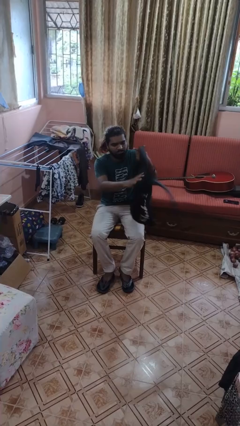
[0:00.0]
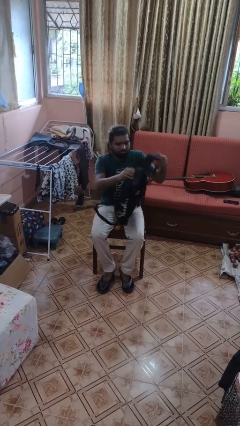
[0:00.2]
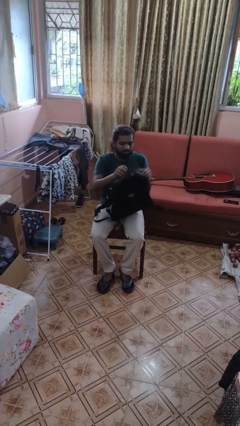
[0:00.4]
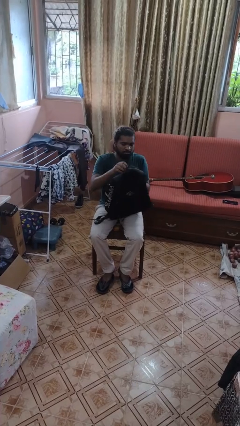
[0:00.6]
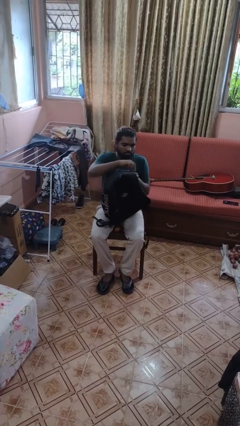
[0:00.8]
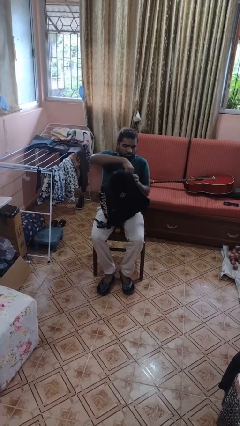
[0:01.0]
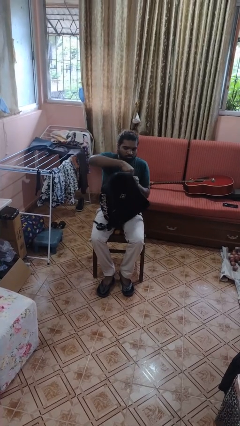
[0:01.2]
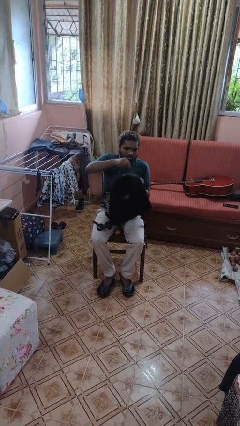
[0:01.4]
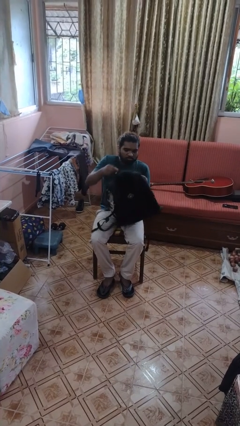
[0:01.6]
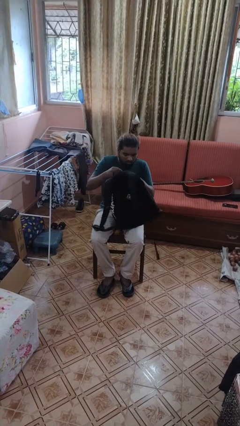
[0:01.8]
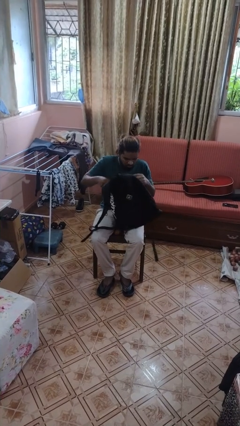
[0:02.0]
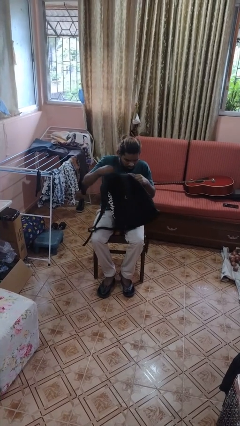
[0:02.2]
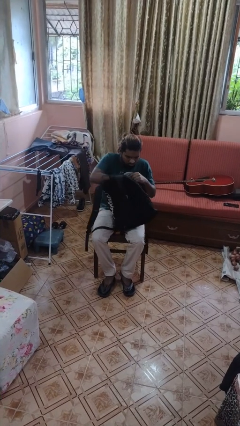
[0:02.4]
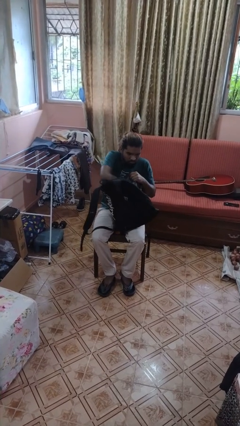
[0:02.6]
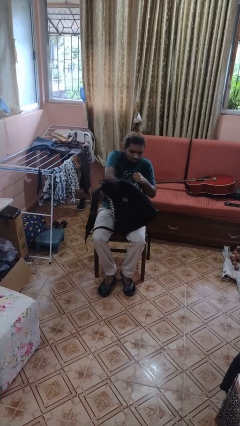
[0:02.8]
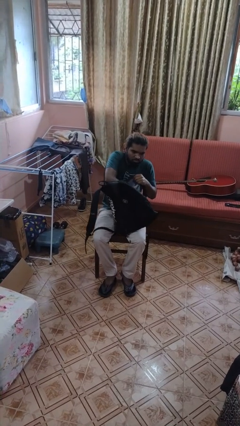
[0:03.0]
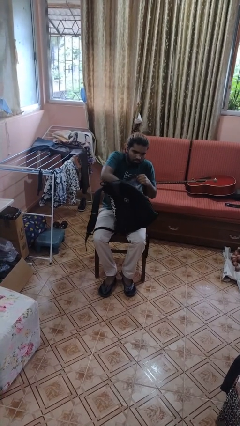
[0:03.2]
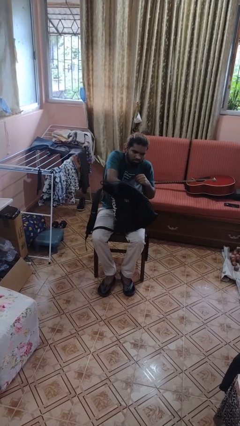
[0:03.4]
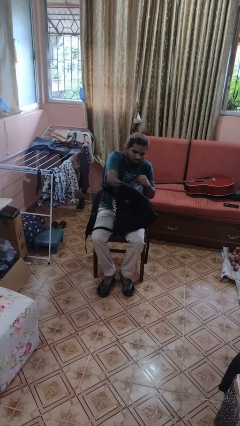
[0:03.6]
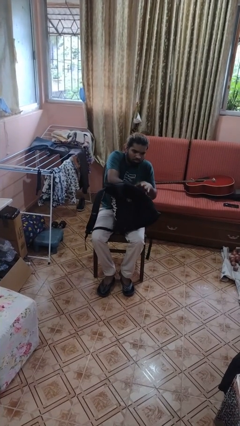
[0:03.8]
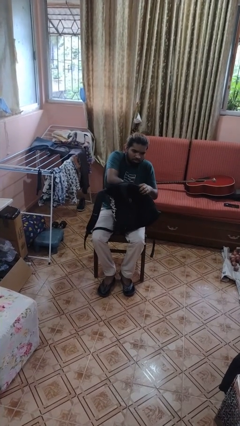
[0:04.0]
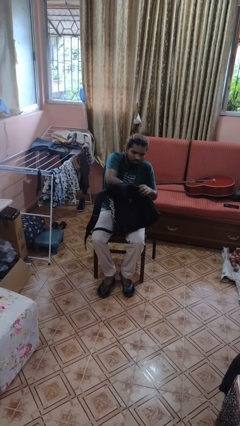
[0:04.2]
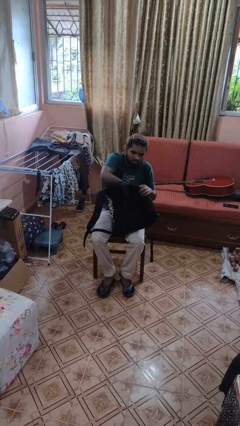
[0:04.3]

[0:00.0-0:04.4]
person searches in backpack

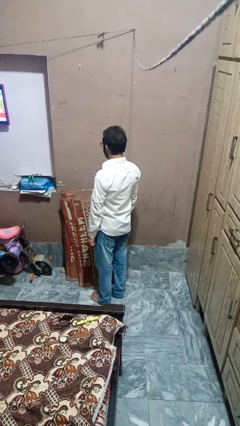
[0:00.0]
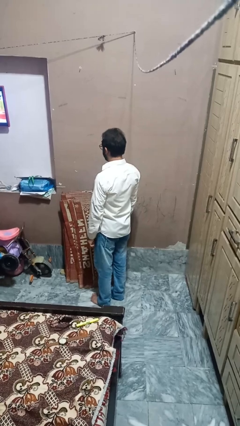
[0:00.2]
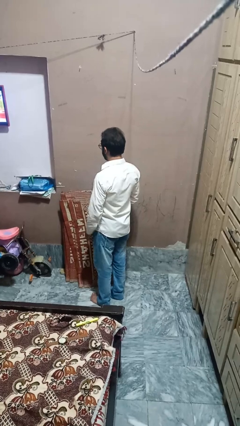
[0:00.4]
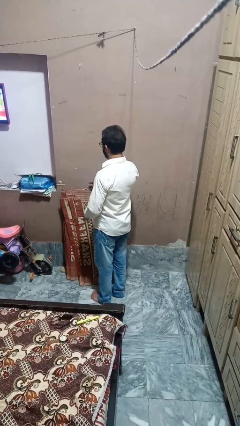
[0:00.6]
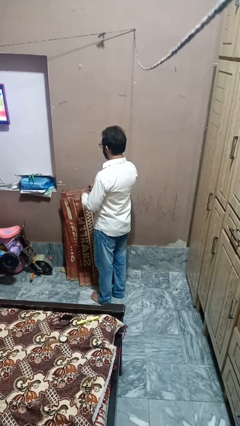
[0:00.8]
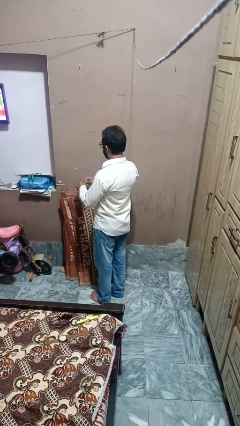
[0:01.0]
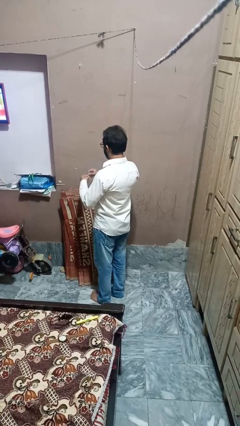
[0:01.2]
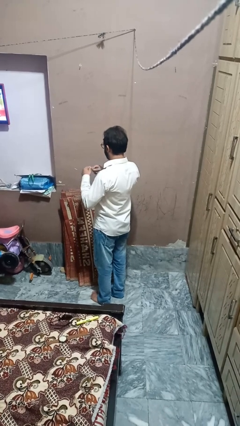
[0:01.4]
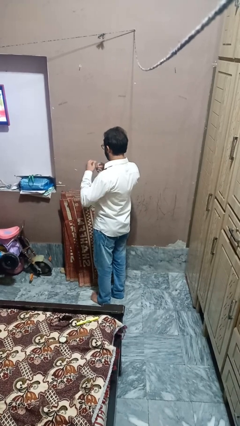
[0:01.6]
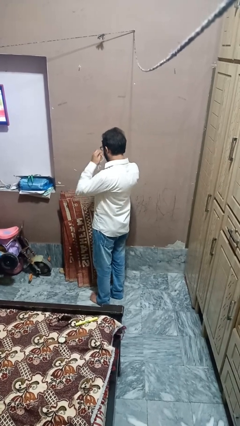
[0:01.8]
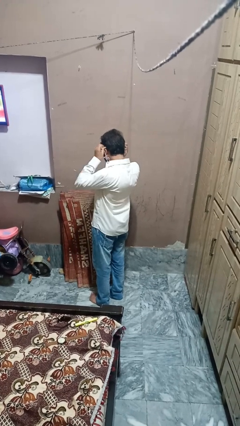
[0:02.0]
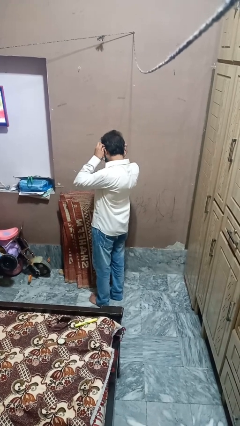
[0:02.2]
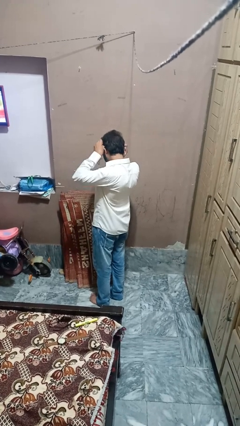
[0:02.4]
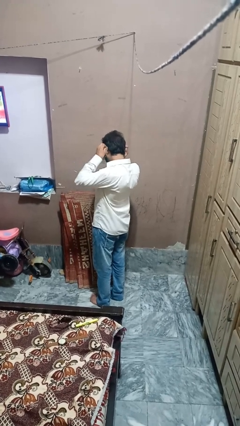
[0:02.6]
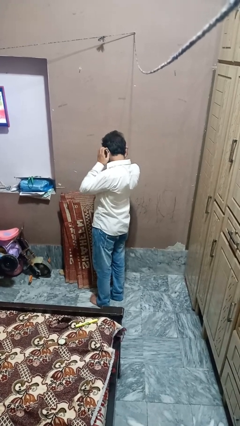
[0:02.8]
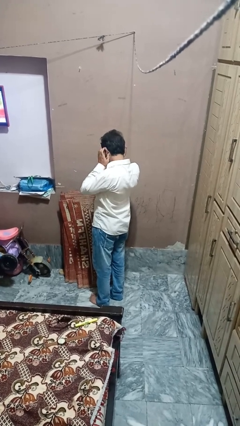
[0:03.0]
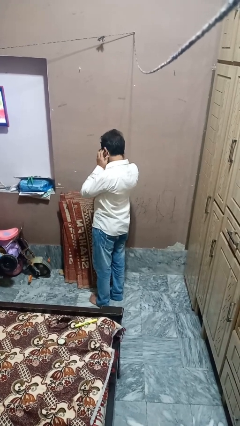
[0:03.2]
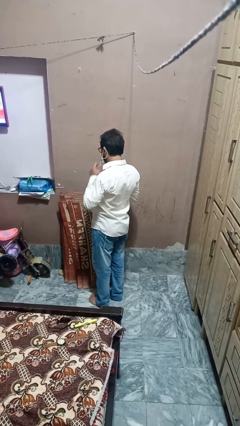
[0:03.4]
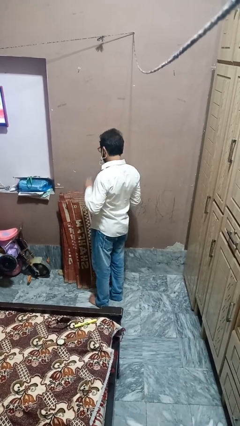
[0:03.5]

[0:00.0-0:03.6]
person puts on earrings

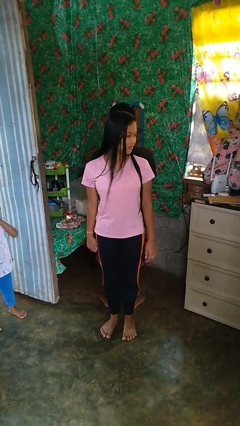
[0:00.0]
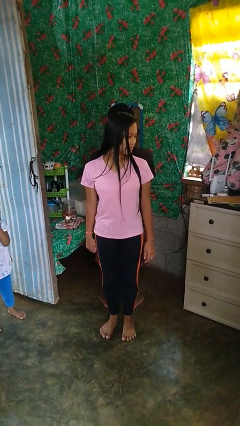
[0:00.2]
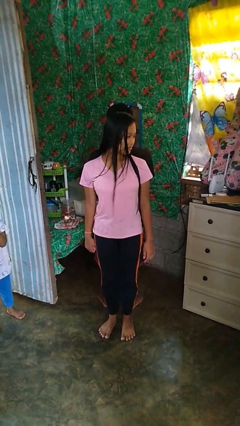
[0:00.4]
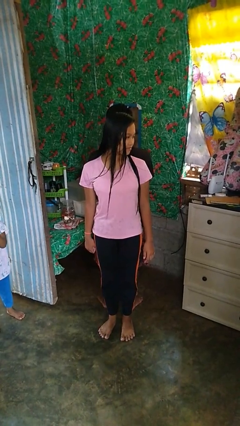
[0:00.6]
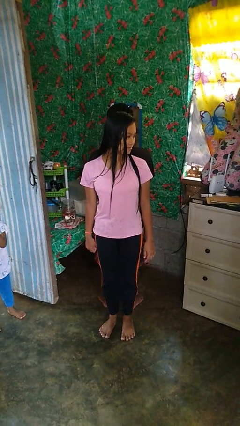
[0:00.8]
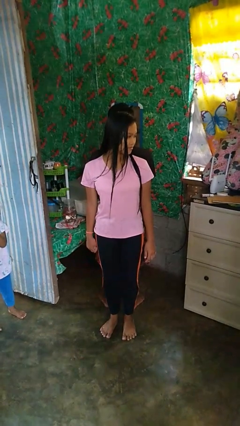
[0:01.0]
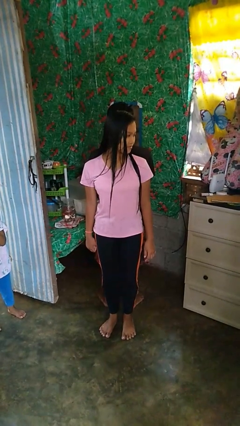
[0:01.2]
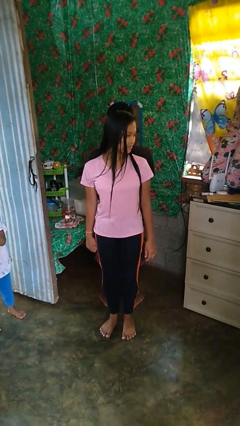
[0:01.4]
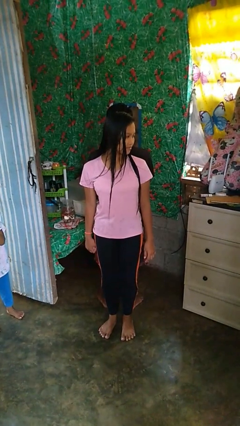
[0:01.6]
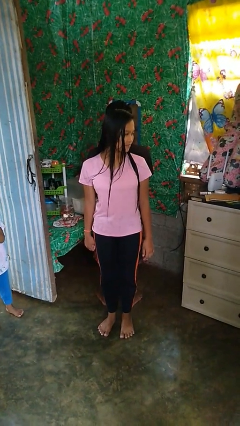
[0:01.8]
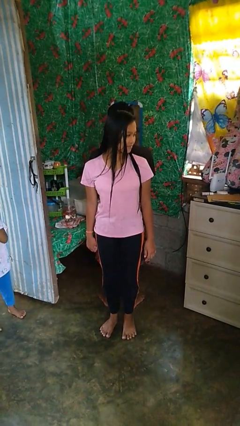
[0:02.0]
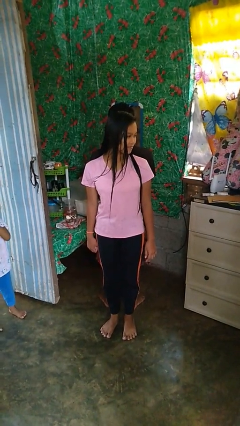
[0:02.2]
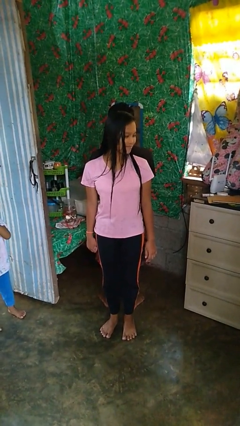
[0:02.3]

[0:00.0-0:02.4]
person looks over shoulder

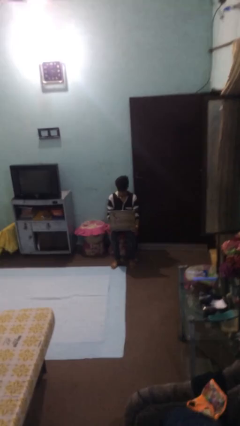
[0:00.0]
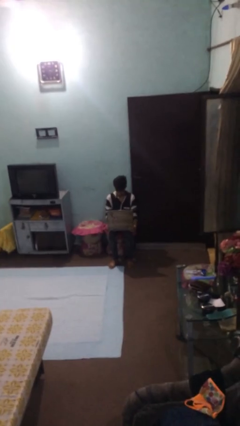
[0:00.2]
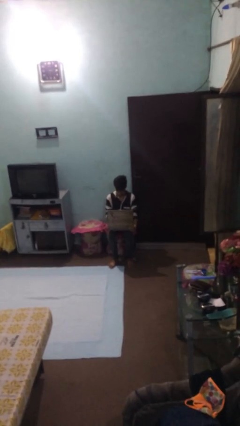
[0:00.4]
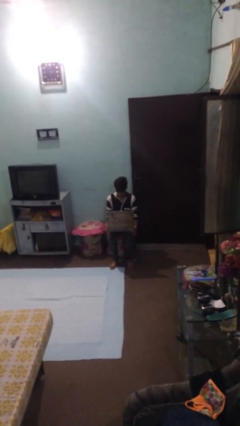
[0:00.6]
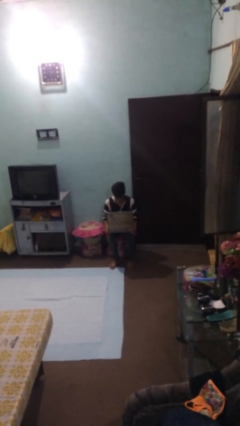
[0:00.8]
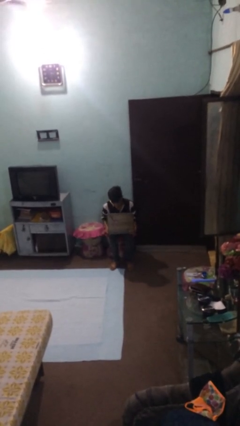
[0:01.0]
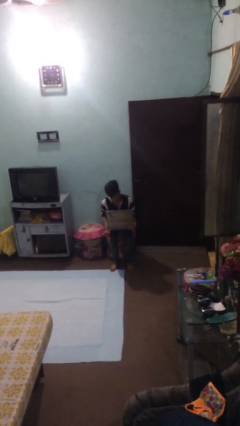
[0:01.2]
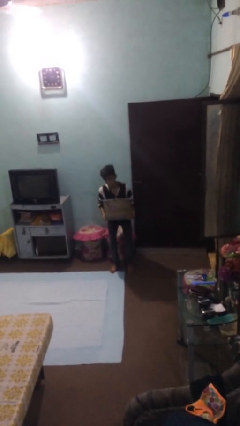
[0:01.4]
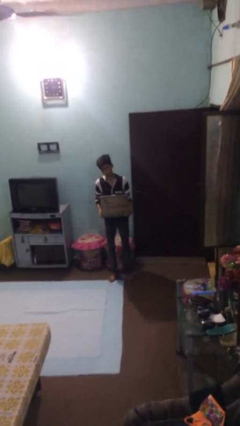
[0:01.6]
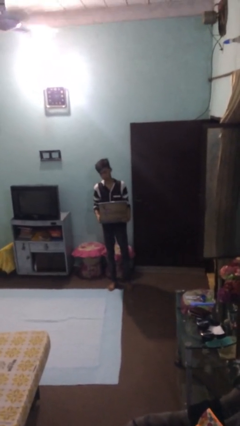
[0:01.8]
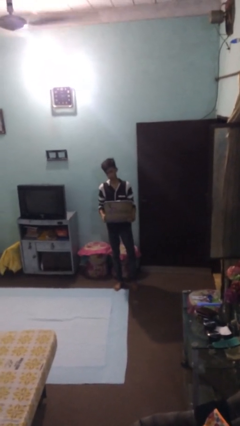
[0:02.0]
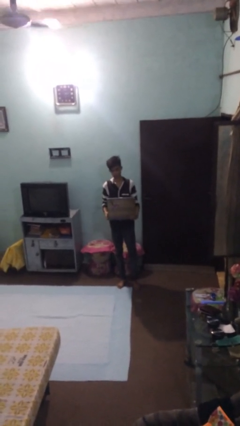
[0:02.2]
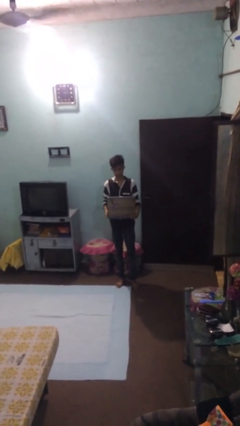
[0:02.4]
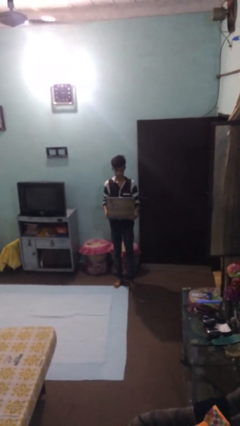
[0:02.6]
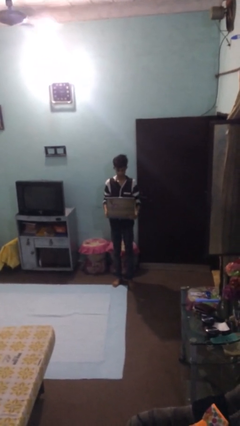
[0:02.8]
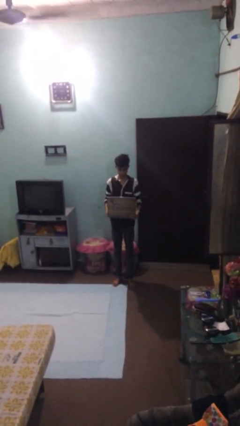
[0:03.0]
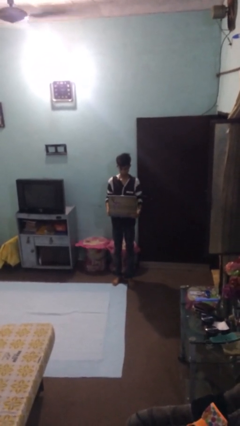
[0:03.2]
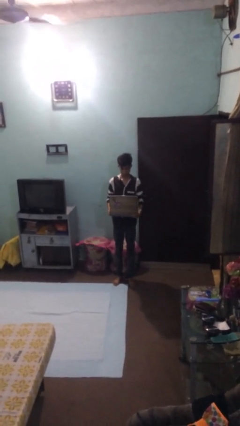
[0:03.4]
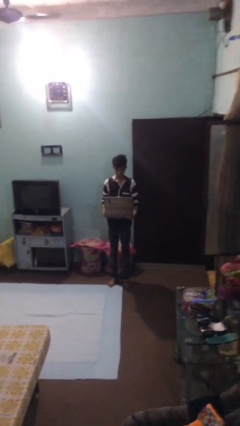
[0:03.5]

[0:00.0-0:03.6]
person stands up

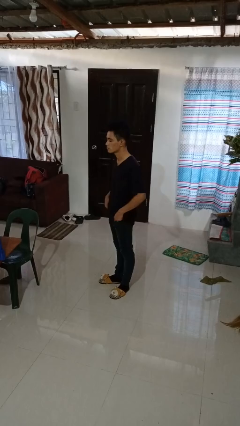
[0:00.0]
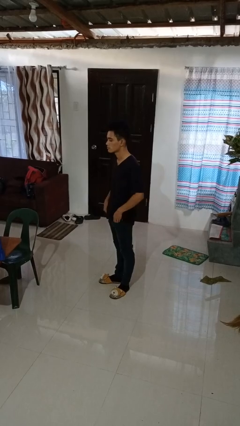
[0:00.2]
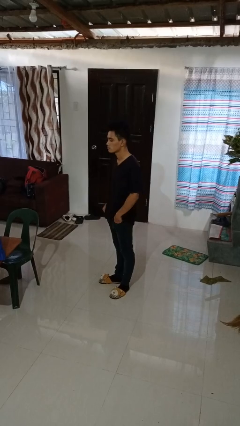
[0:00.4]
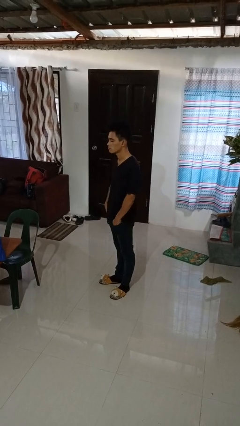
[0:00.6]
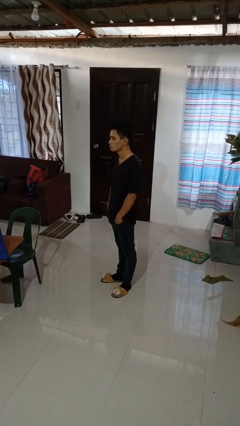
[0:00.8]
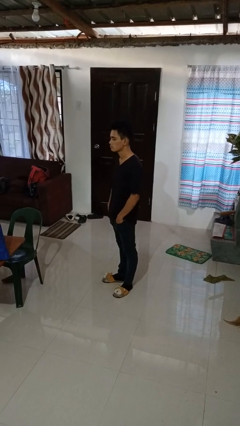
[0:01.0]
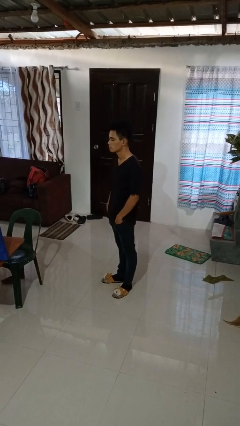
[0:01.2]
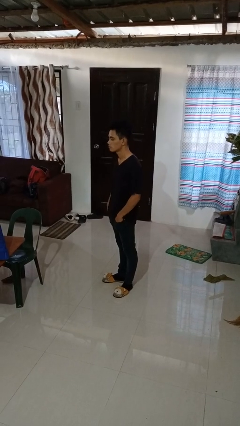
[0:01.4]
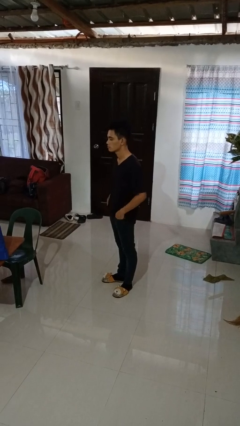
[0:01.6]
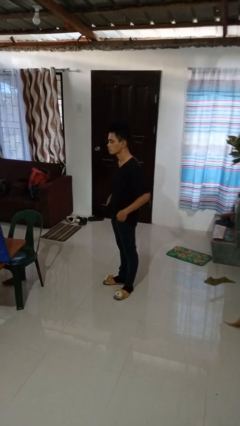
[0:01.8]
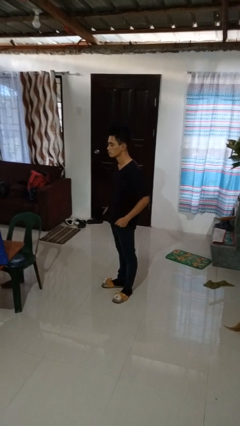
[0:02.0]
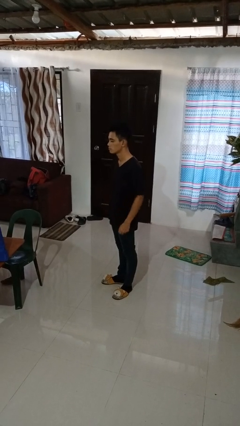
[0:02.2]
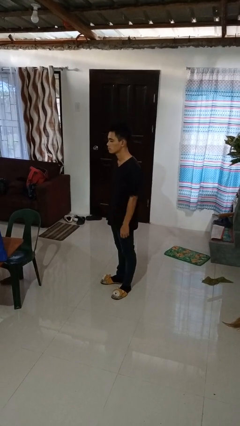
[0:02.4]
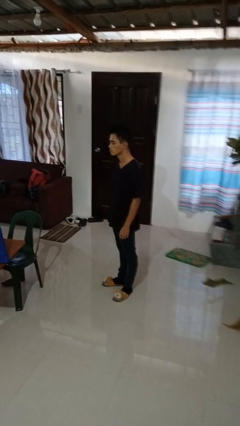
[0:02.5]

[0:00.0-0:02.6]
person puts hands in back pockets

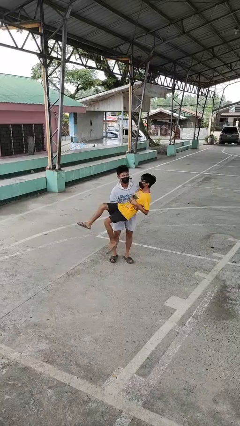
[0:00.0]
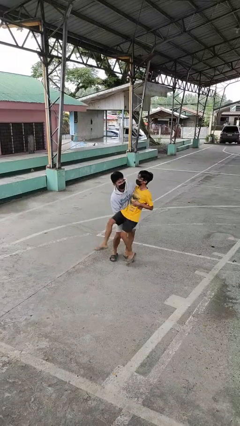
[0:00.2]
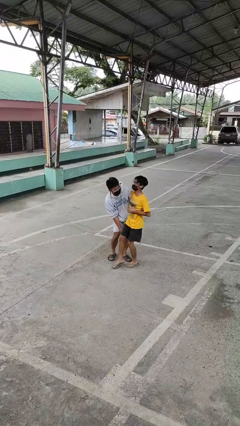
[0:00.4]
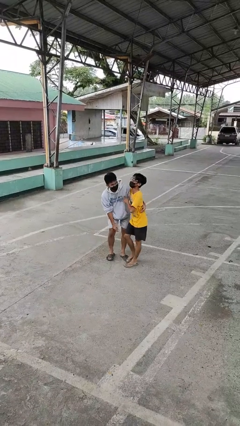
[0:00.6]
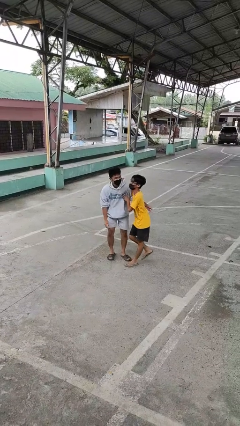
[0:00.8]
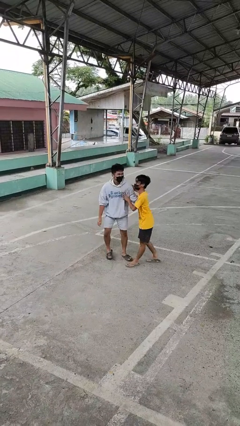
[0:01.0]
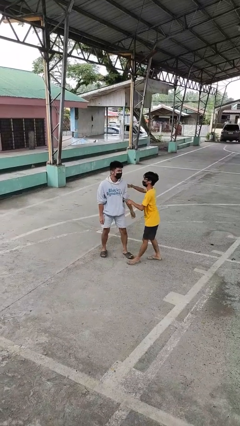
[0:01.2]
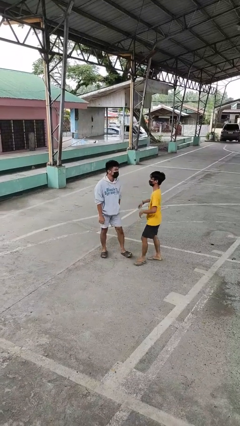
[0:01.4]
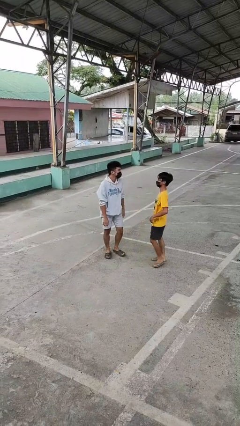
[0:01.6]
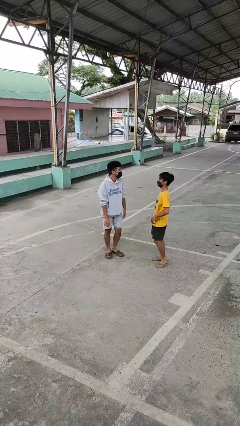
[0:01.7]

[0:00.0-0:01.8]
person puts down person
